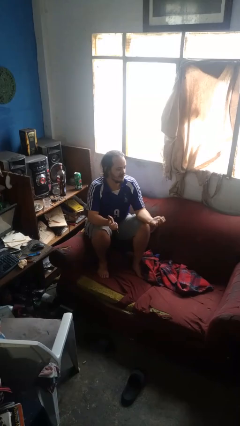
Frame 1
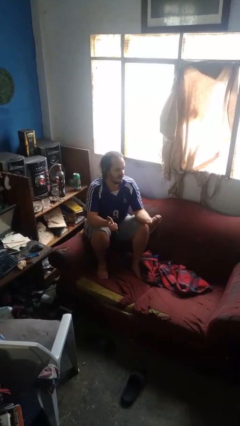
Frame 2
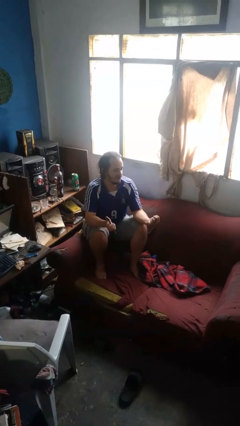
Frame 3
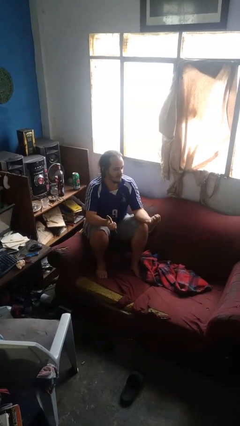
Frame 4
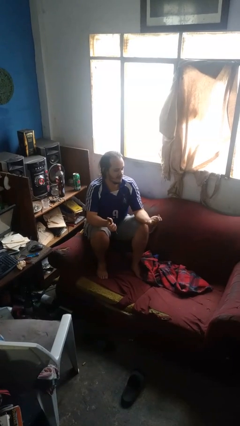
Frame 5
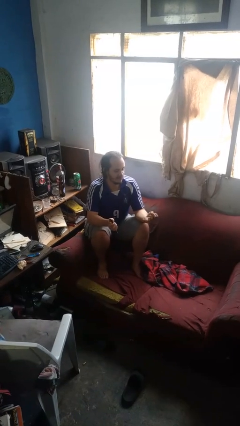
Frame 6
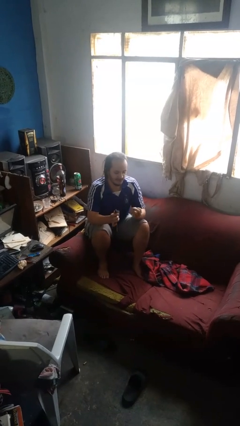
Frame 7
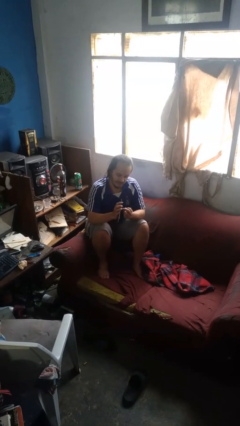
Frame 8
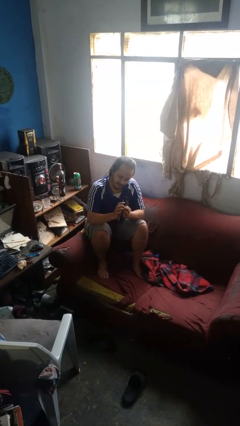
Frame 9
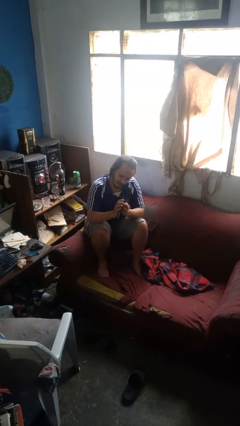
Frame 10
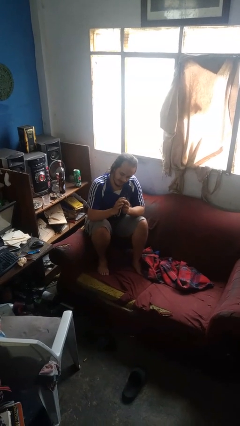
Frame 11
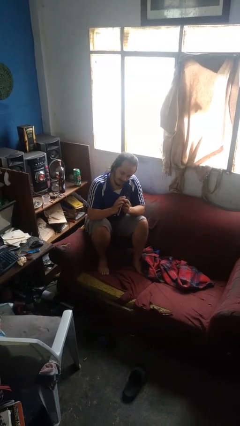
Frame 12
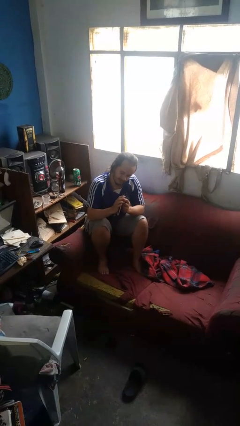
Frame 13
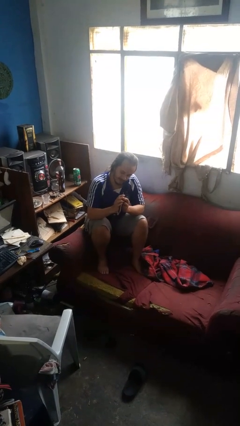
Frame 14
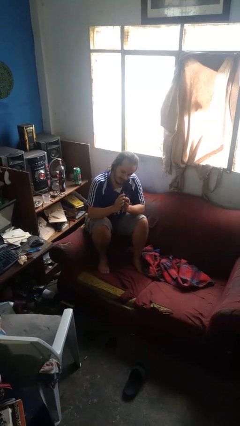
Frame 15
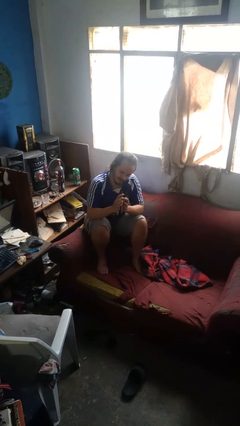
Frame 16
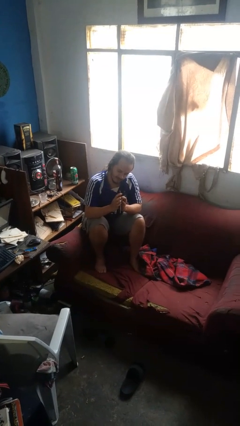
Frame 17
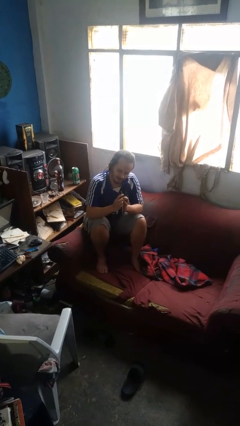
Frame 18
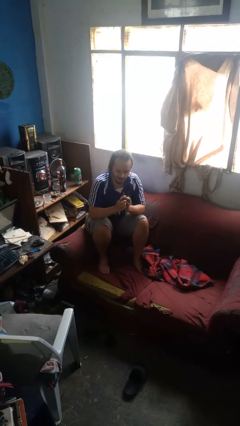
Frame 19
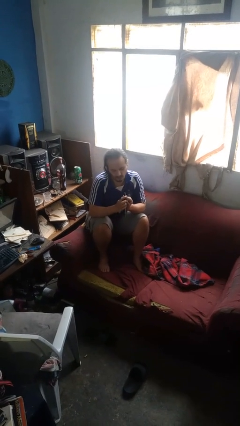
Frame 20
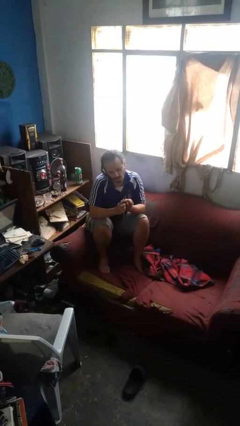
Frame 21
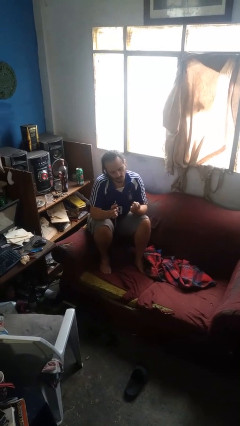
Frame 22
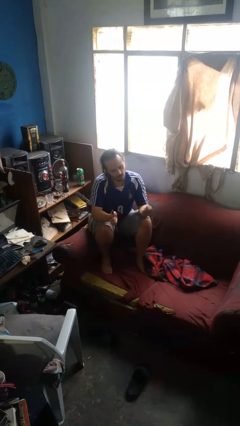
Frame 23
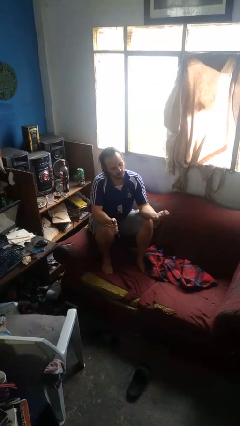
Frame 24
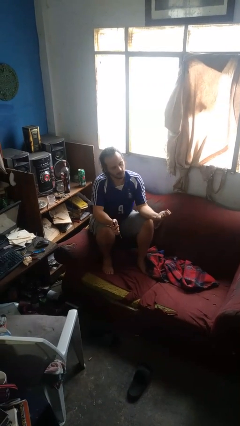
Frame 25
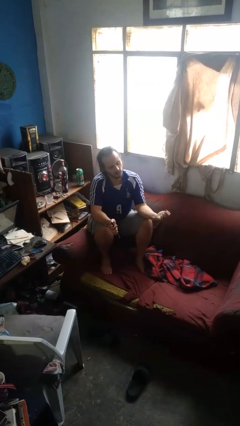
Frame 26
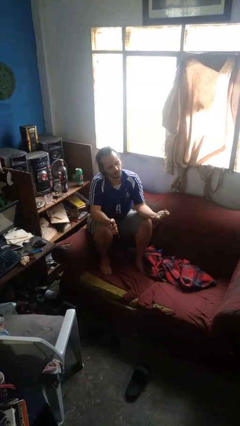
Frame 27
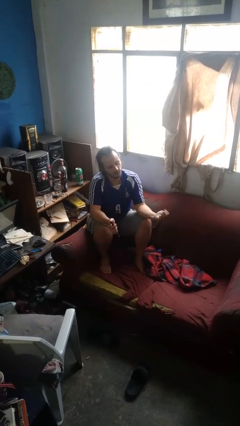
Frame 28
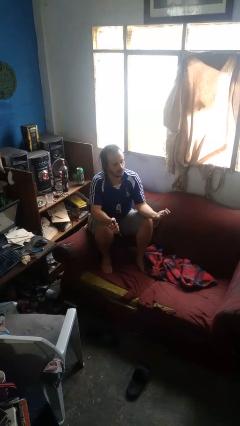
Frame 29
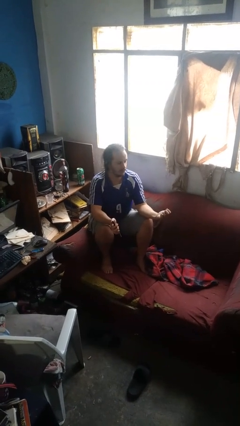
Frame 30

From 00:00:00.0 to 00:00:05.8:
person files fingernails

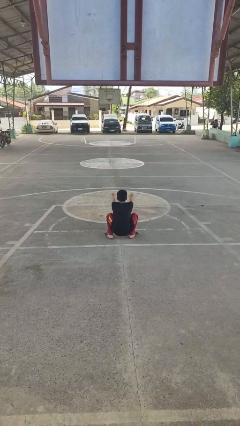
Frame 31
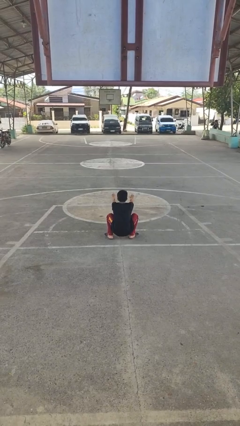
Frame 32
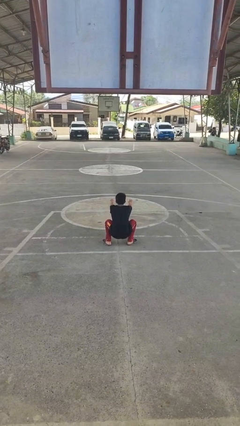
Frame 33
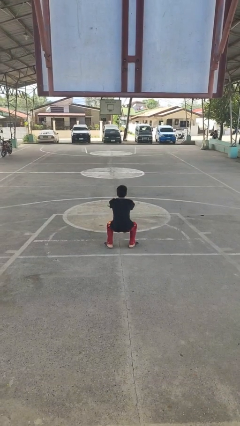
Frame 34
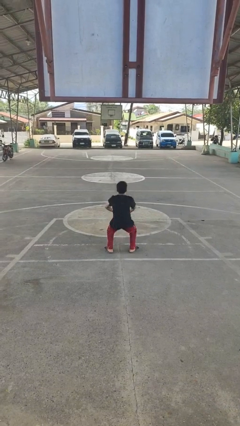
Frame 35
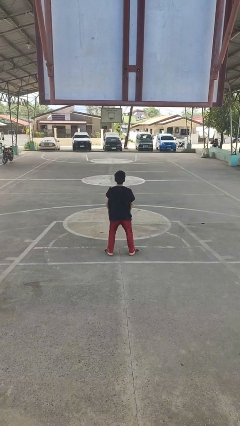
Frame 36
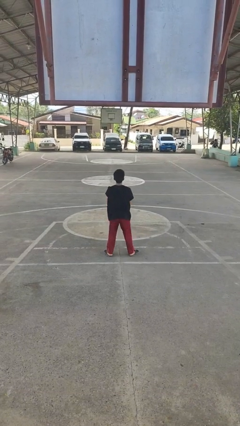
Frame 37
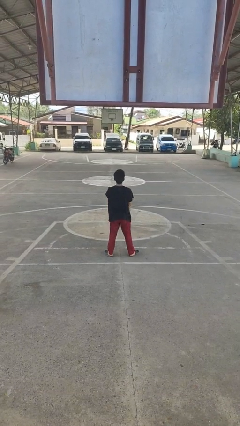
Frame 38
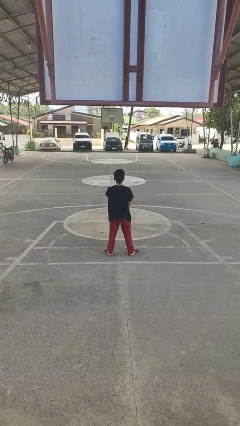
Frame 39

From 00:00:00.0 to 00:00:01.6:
person stands up

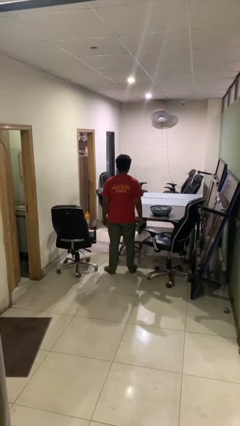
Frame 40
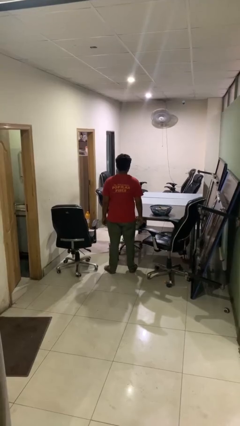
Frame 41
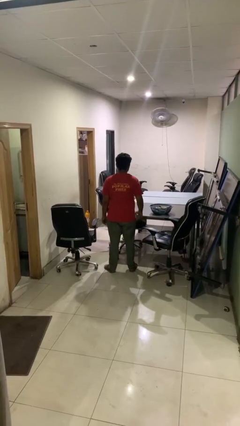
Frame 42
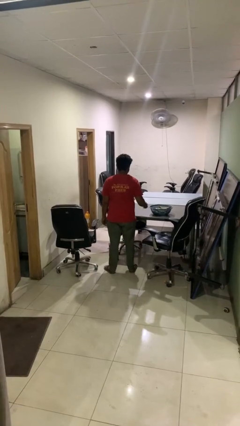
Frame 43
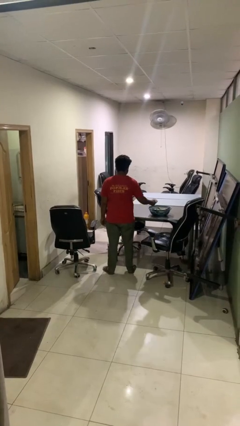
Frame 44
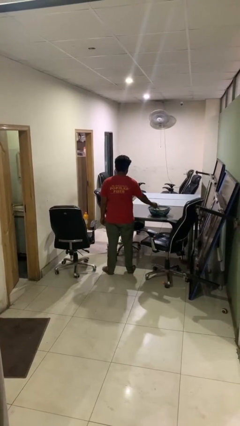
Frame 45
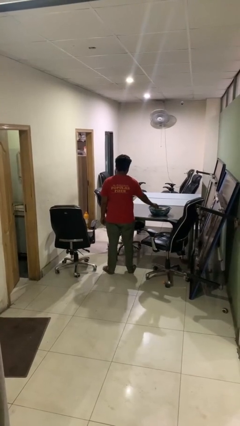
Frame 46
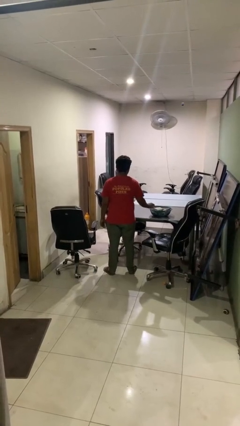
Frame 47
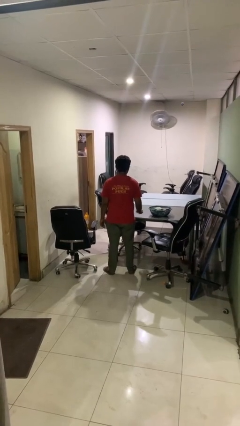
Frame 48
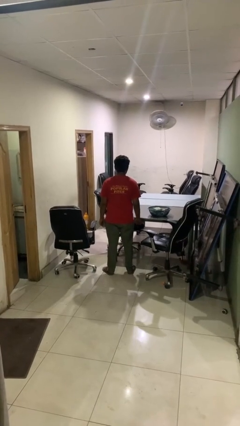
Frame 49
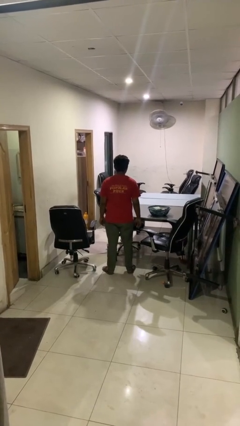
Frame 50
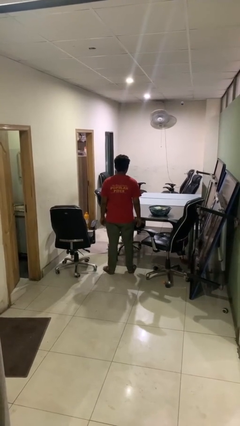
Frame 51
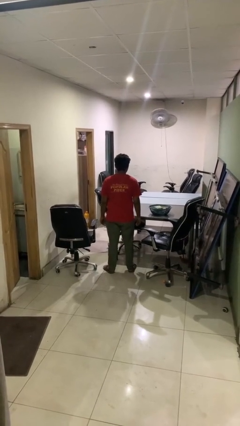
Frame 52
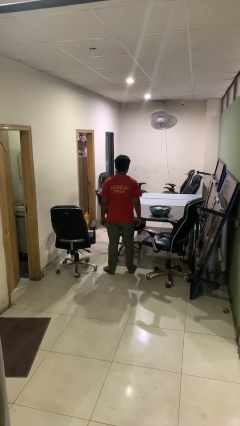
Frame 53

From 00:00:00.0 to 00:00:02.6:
person puts object into basket

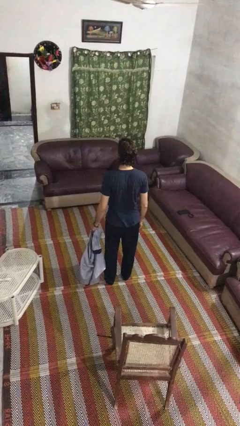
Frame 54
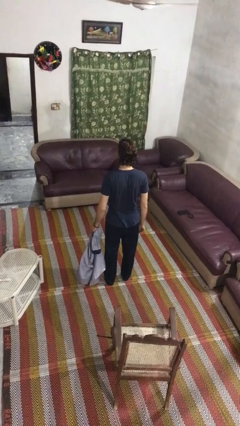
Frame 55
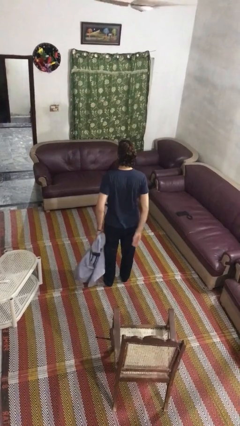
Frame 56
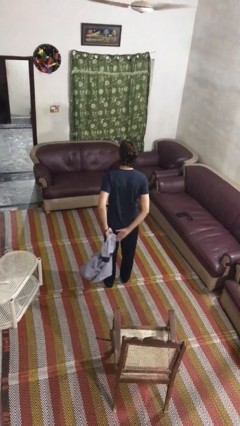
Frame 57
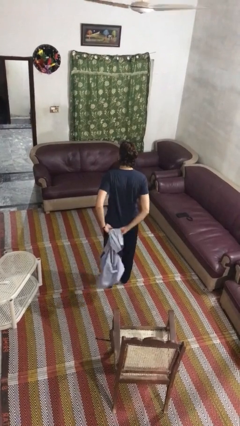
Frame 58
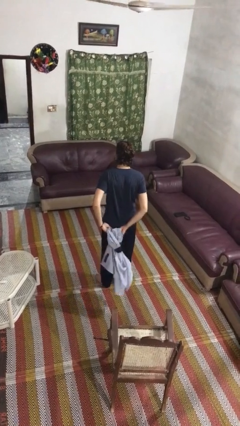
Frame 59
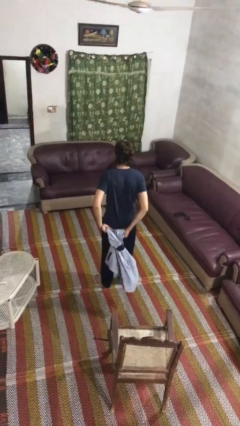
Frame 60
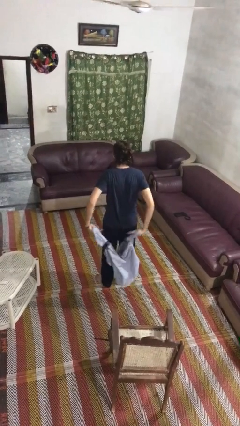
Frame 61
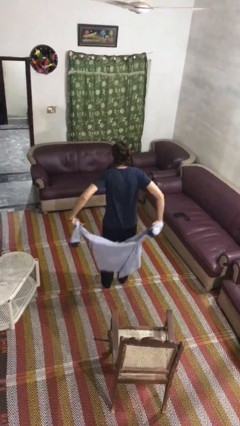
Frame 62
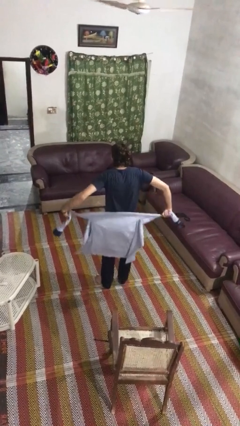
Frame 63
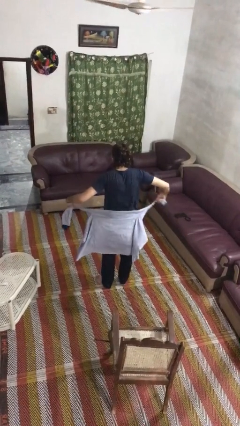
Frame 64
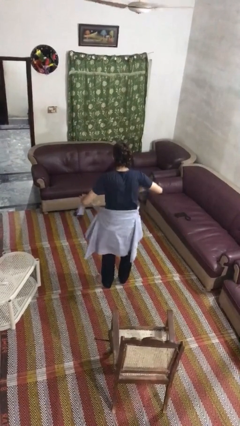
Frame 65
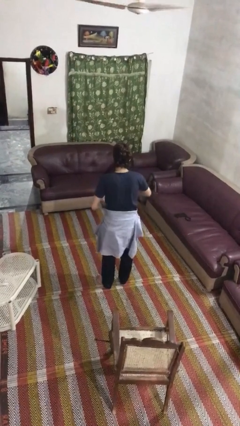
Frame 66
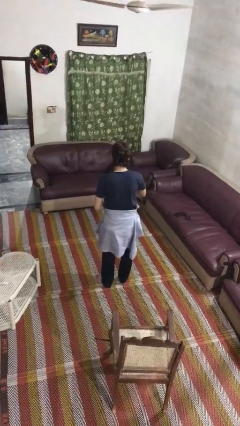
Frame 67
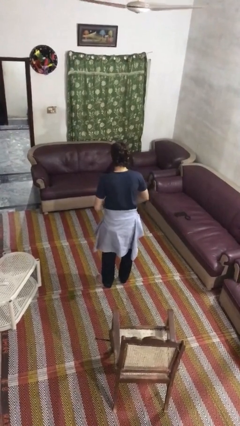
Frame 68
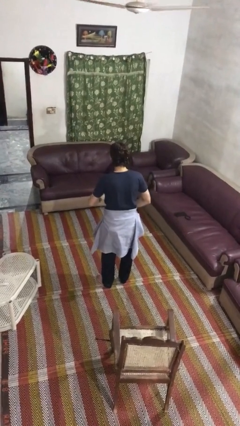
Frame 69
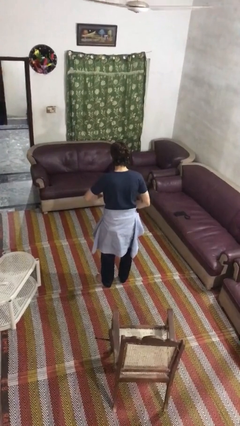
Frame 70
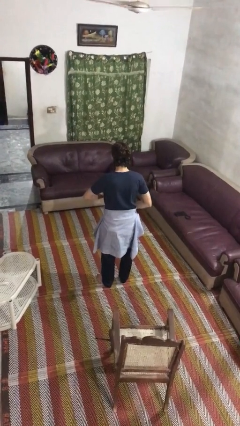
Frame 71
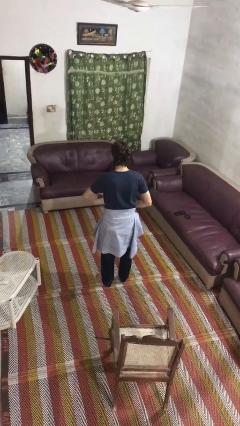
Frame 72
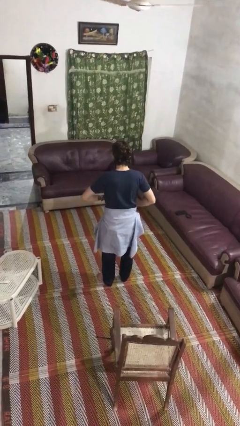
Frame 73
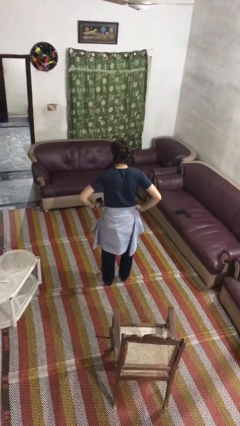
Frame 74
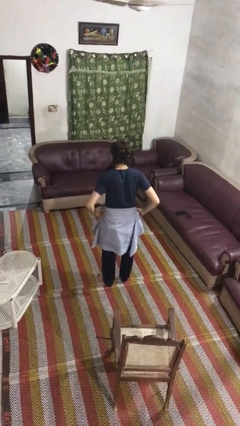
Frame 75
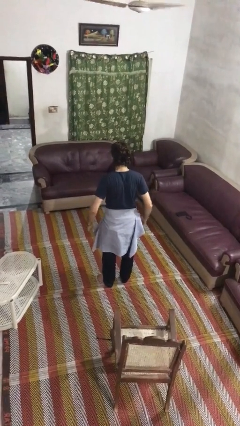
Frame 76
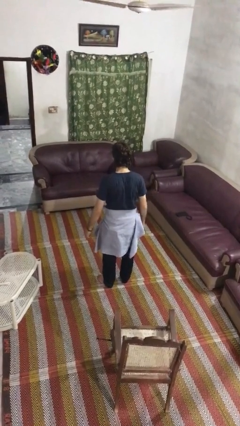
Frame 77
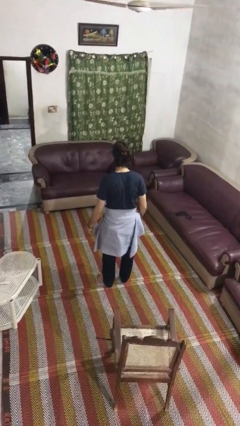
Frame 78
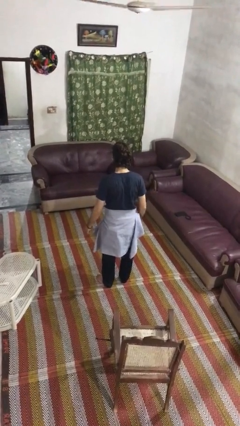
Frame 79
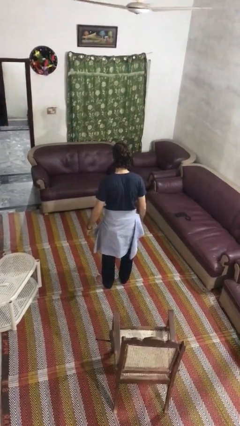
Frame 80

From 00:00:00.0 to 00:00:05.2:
person ties jacket around waist

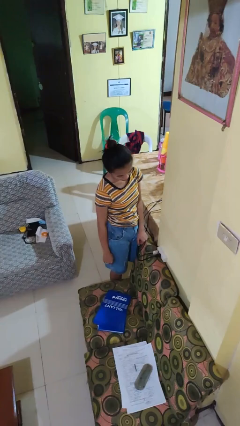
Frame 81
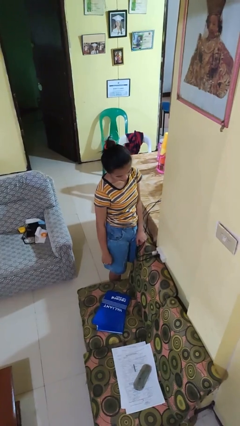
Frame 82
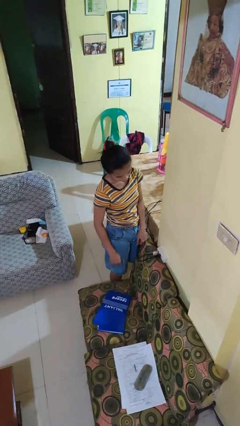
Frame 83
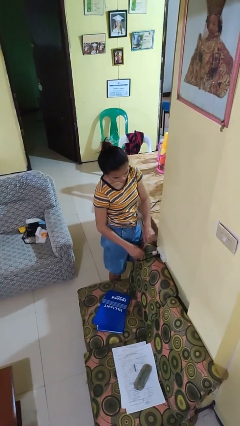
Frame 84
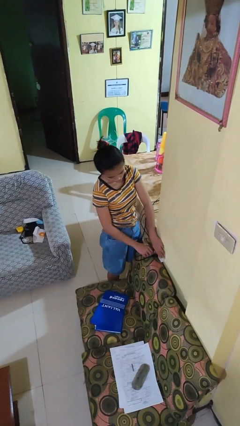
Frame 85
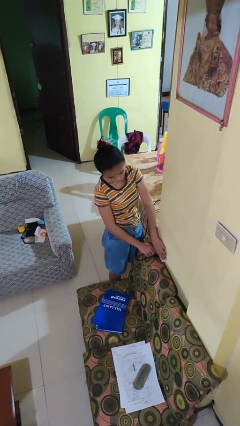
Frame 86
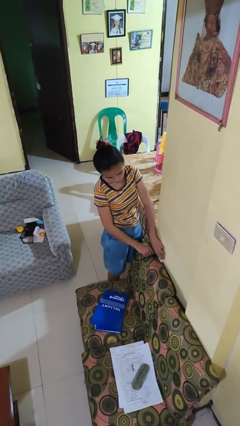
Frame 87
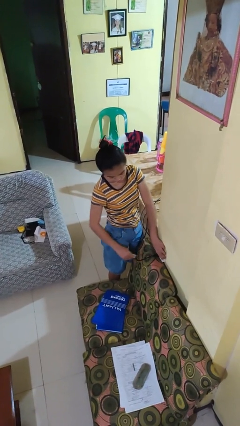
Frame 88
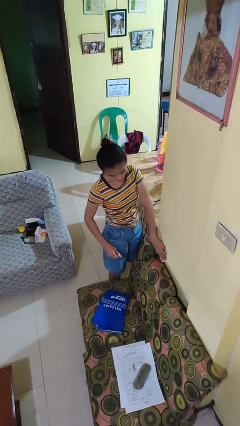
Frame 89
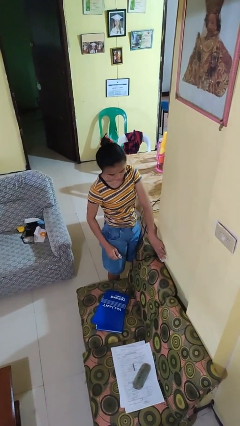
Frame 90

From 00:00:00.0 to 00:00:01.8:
person unplugs from electrical socket

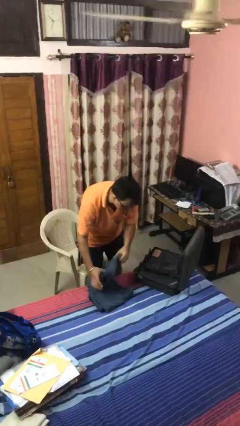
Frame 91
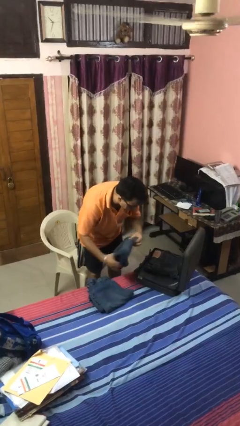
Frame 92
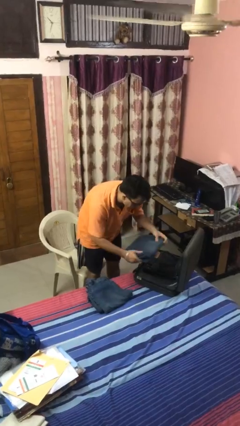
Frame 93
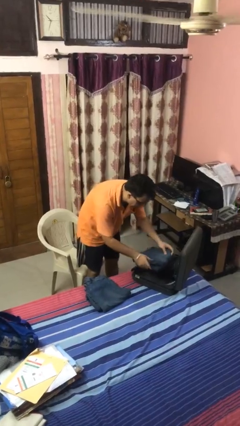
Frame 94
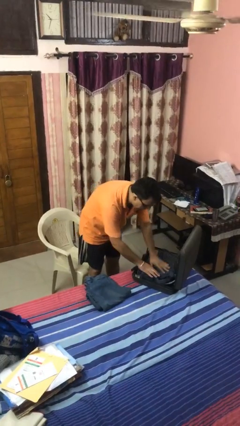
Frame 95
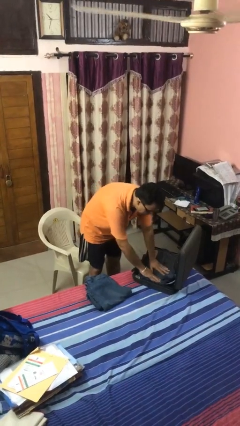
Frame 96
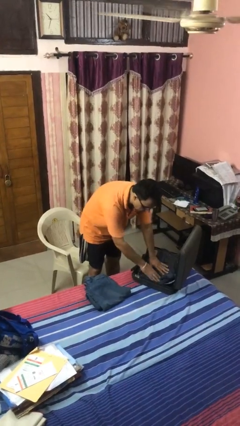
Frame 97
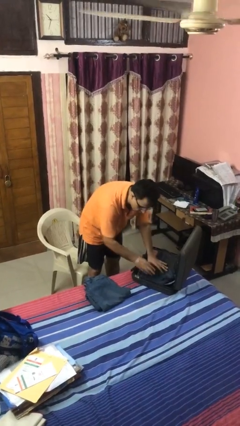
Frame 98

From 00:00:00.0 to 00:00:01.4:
person loads clothes into suitcase
